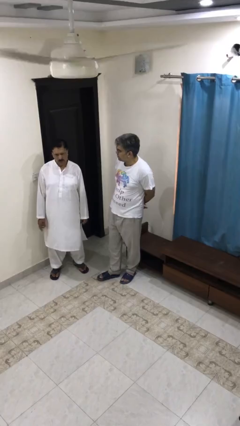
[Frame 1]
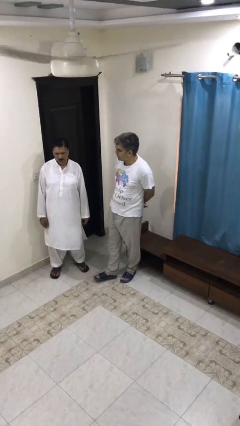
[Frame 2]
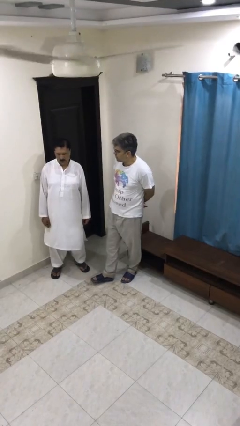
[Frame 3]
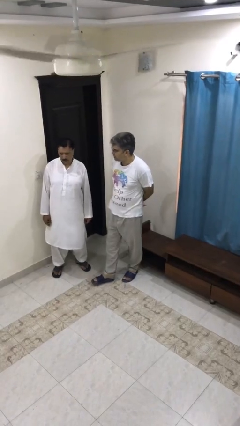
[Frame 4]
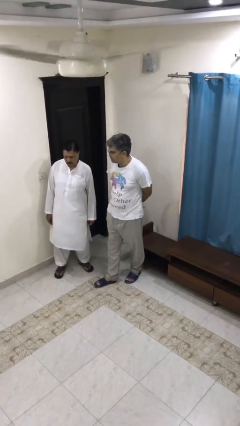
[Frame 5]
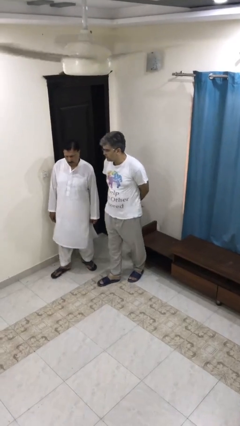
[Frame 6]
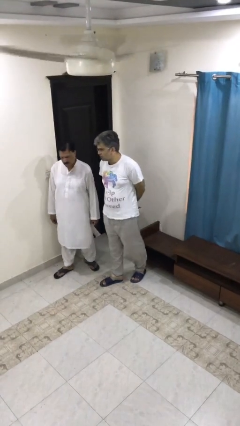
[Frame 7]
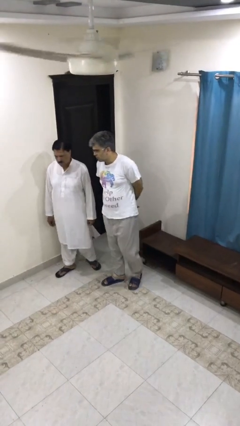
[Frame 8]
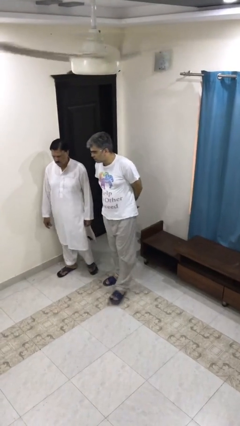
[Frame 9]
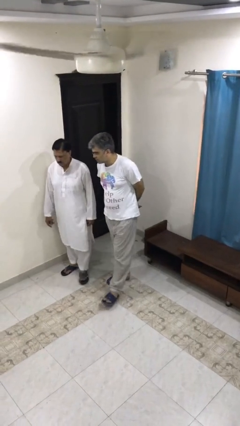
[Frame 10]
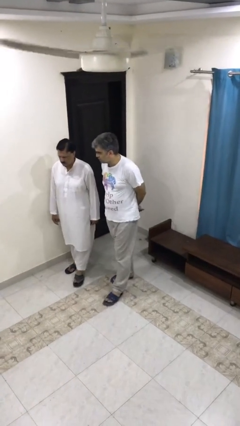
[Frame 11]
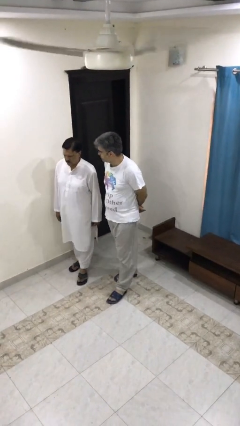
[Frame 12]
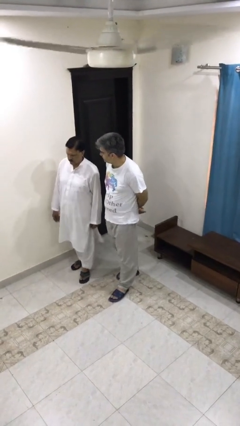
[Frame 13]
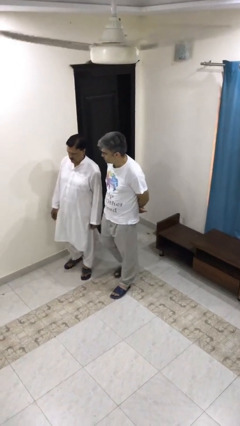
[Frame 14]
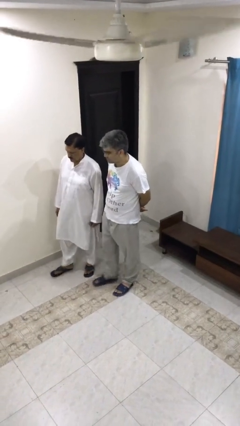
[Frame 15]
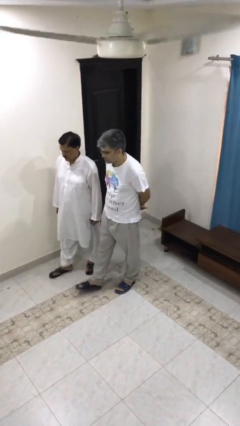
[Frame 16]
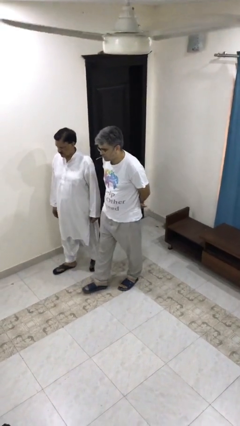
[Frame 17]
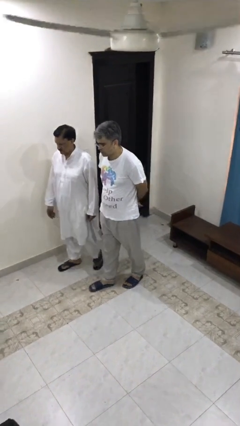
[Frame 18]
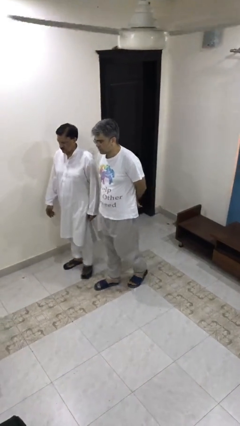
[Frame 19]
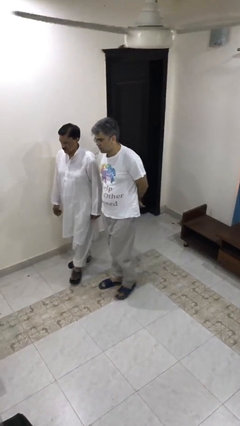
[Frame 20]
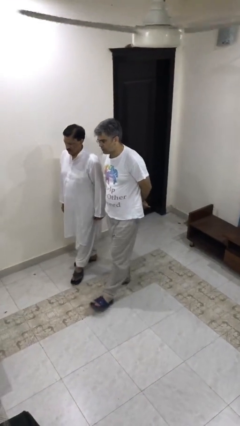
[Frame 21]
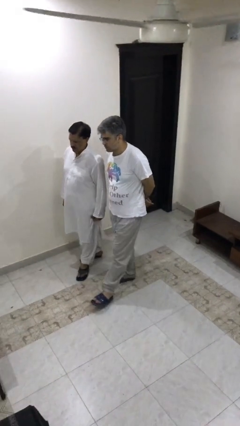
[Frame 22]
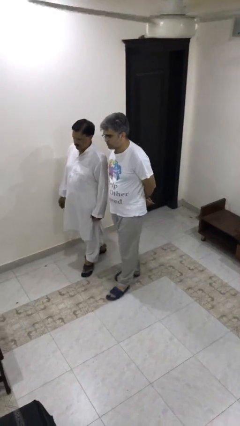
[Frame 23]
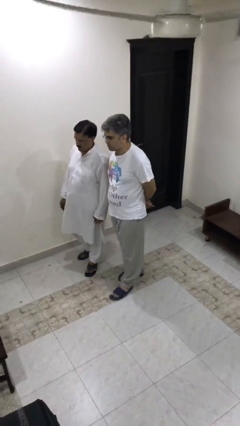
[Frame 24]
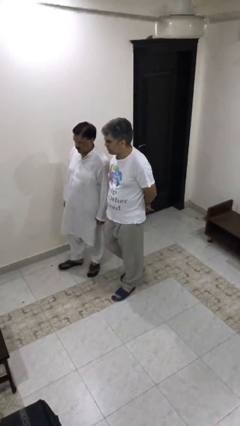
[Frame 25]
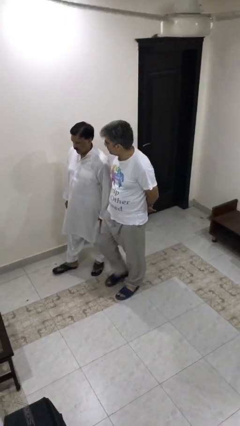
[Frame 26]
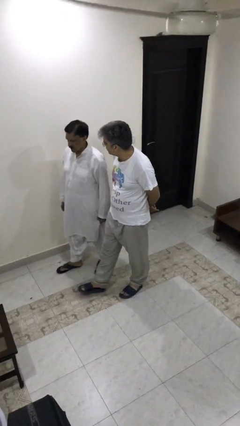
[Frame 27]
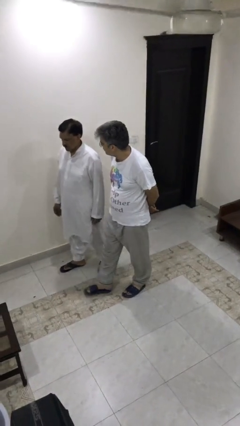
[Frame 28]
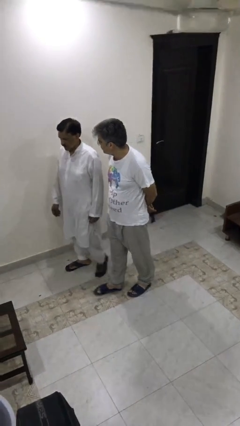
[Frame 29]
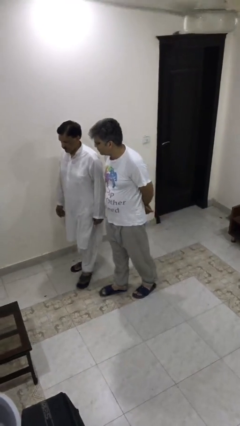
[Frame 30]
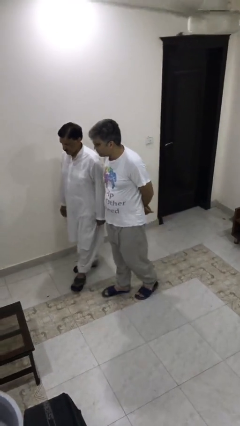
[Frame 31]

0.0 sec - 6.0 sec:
person talks to person

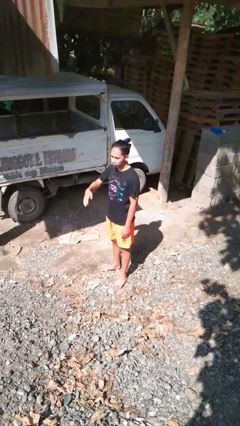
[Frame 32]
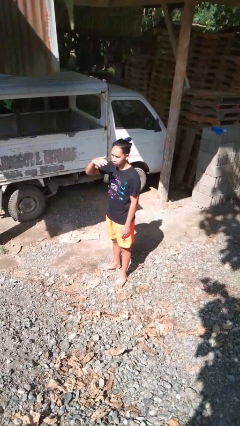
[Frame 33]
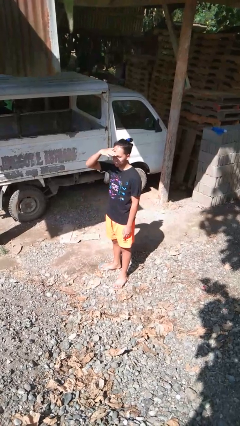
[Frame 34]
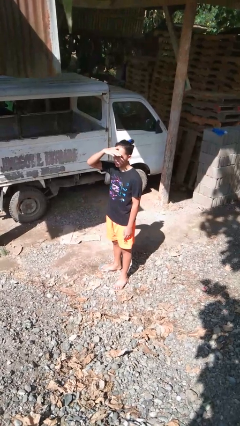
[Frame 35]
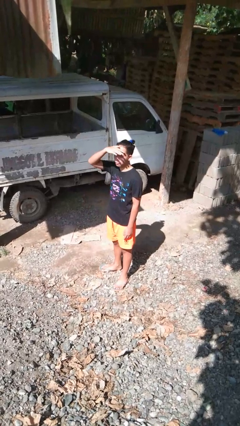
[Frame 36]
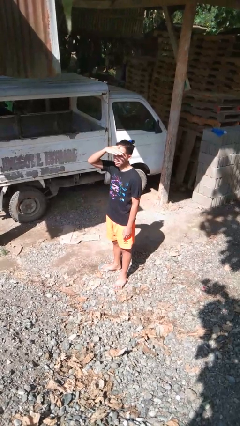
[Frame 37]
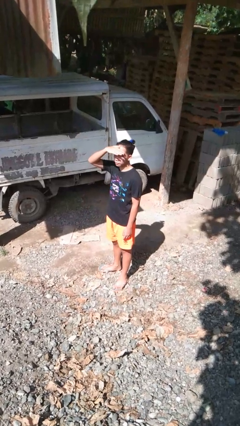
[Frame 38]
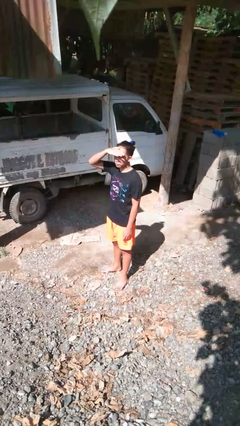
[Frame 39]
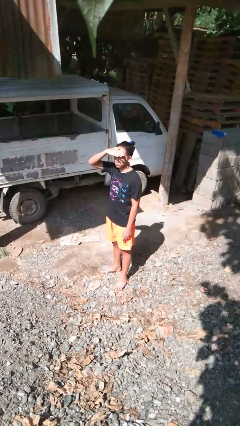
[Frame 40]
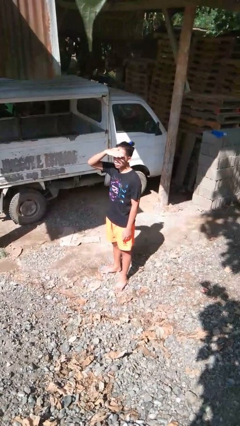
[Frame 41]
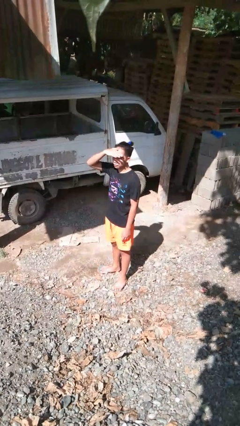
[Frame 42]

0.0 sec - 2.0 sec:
person shades eyes

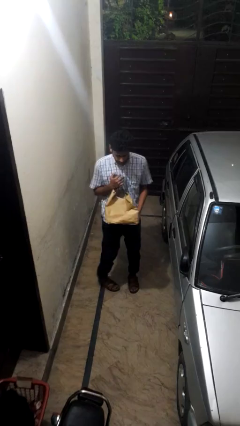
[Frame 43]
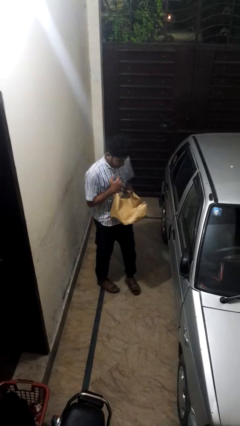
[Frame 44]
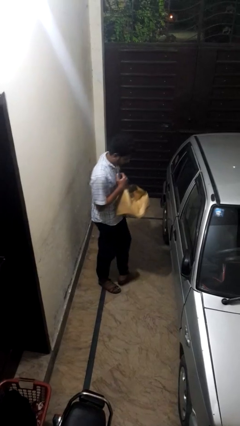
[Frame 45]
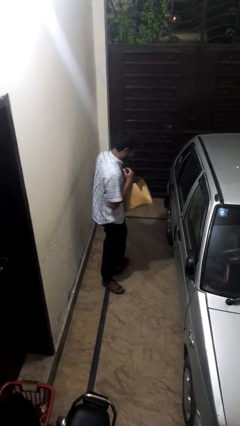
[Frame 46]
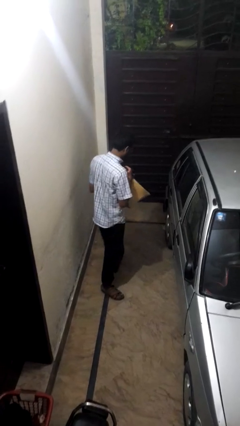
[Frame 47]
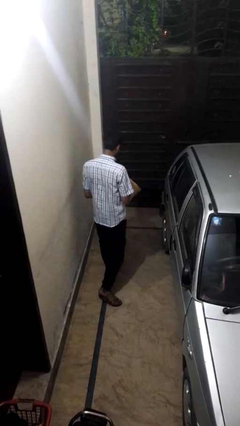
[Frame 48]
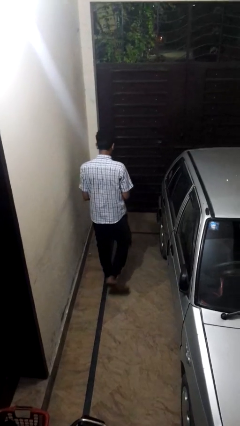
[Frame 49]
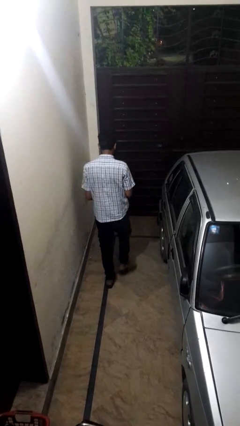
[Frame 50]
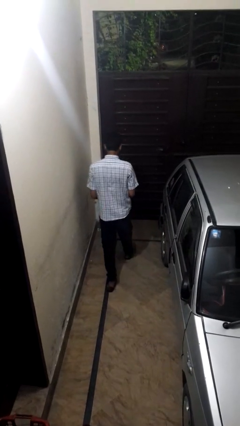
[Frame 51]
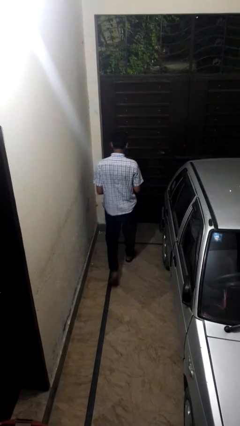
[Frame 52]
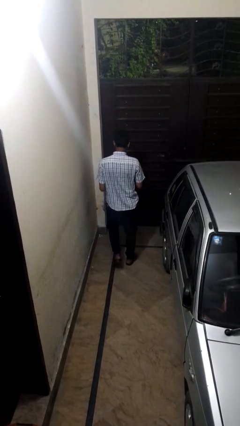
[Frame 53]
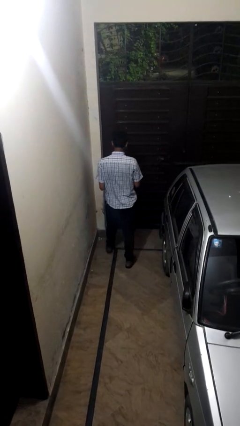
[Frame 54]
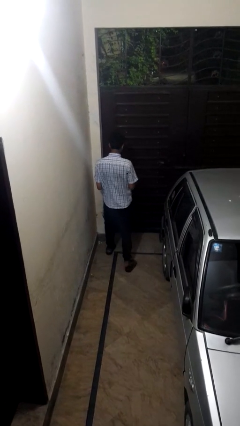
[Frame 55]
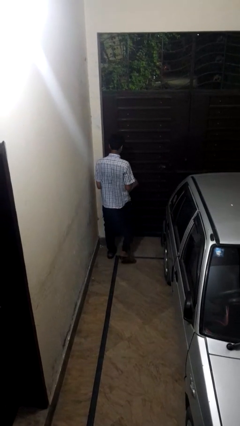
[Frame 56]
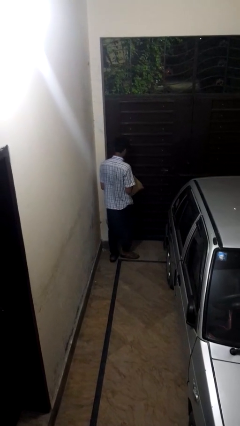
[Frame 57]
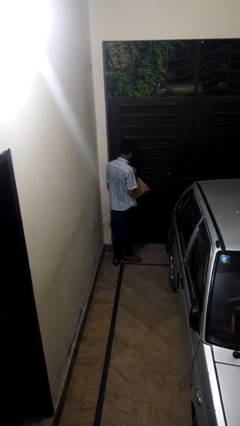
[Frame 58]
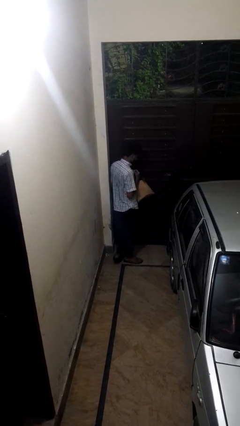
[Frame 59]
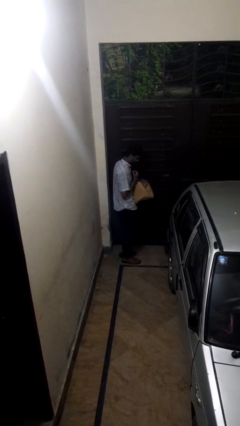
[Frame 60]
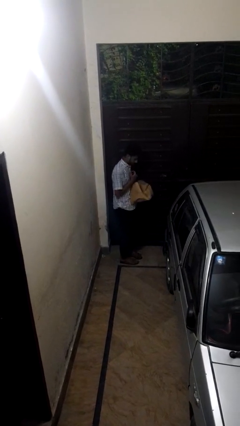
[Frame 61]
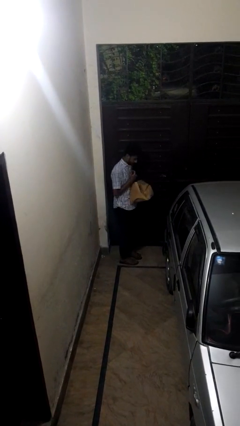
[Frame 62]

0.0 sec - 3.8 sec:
person carries groceries

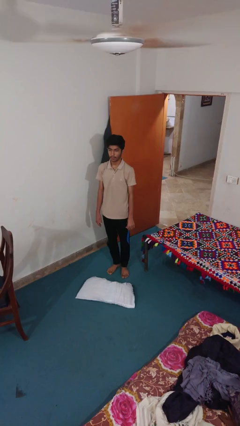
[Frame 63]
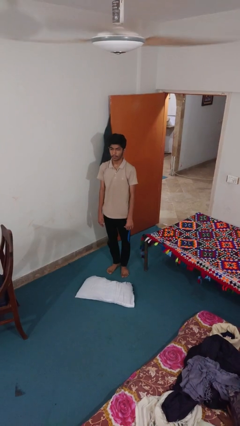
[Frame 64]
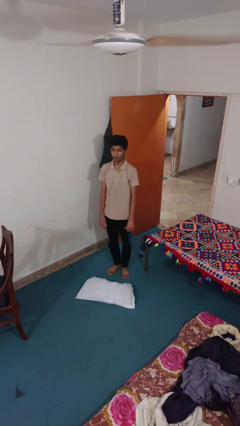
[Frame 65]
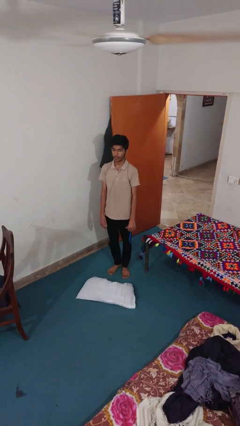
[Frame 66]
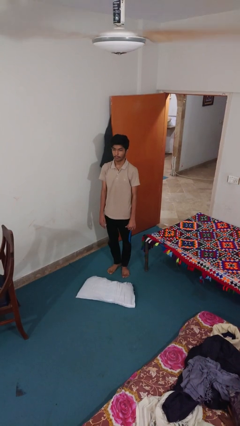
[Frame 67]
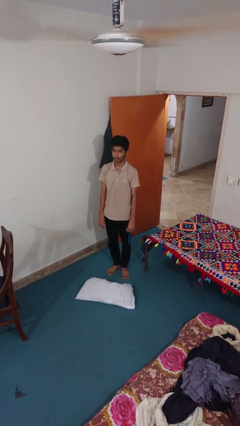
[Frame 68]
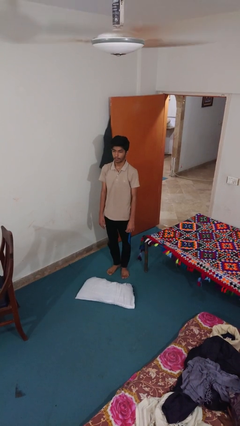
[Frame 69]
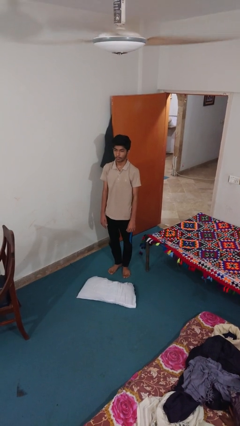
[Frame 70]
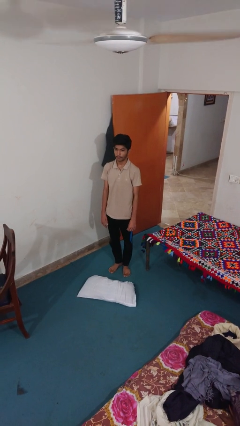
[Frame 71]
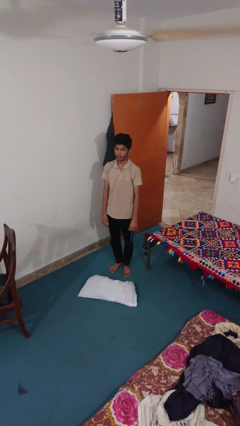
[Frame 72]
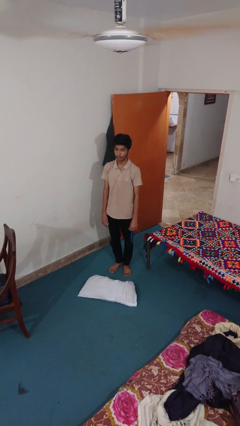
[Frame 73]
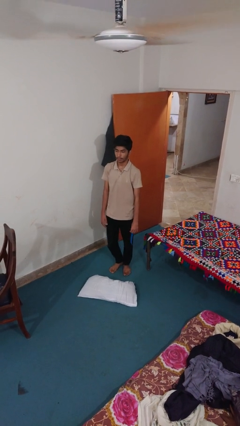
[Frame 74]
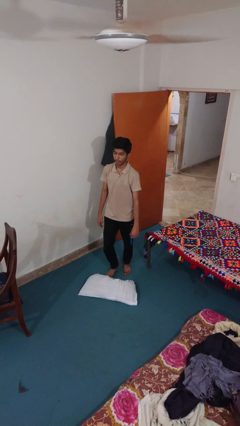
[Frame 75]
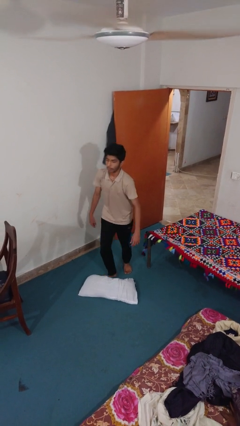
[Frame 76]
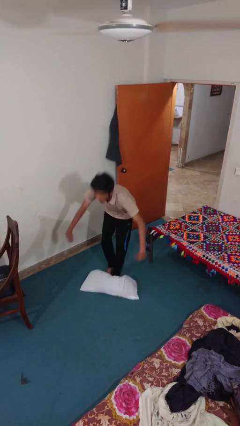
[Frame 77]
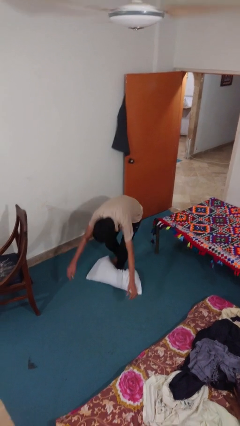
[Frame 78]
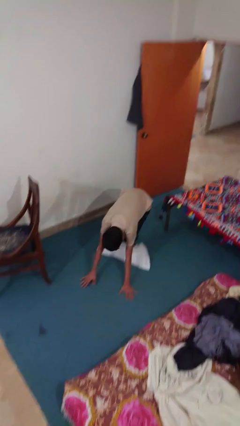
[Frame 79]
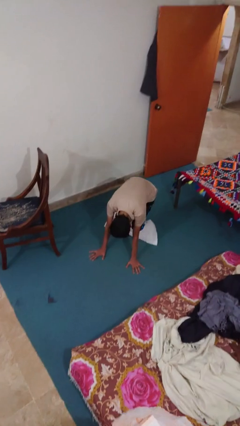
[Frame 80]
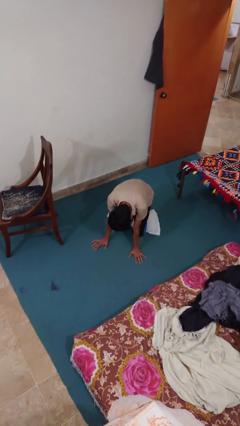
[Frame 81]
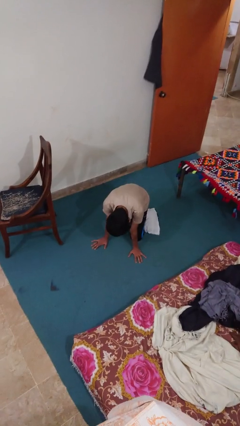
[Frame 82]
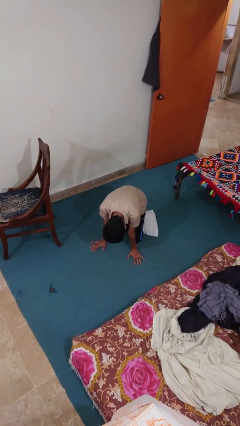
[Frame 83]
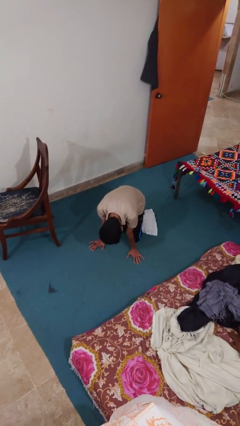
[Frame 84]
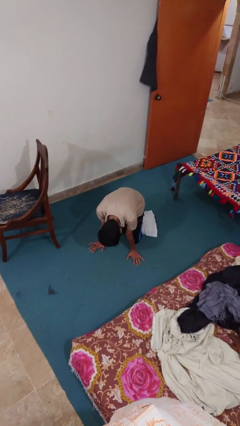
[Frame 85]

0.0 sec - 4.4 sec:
person trips on object on floor

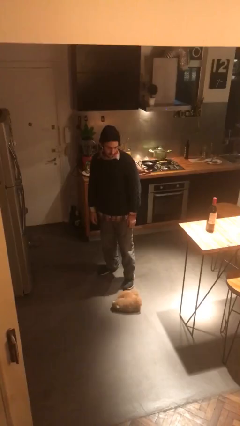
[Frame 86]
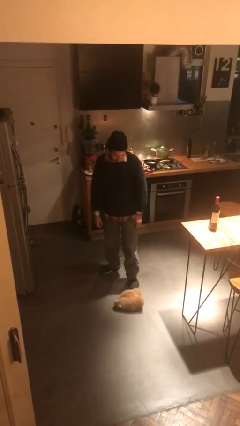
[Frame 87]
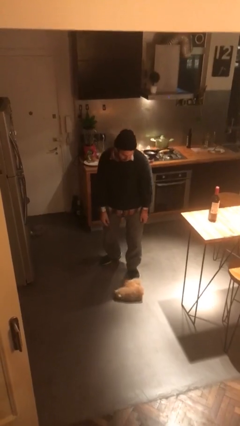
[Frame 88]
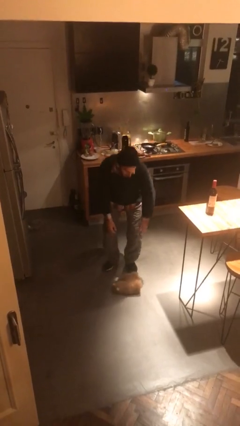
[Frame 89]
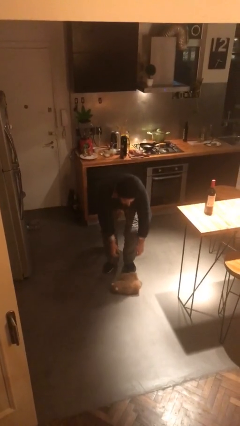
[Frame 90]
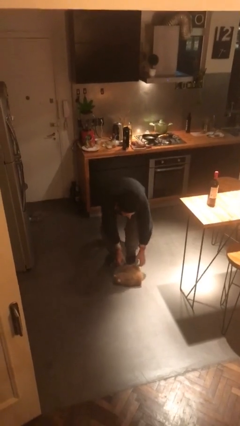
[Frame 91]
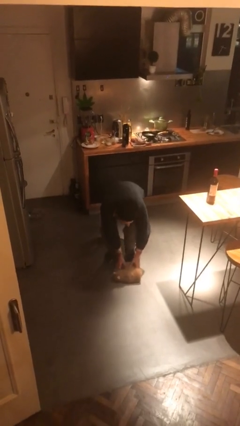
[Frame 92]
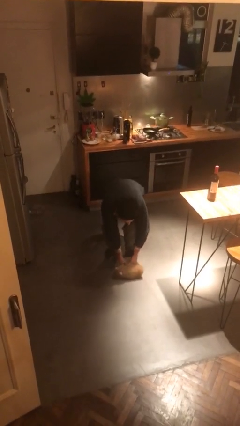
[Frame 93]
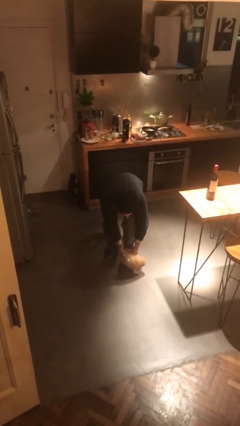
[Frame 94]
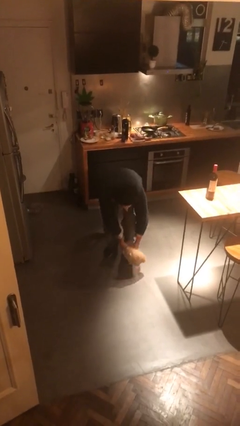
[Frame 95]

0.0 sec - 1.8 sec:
person picks up object from floor
